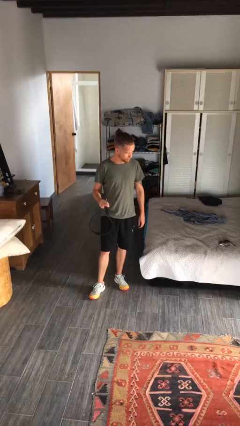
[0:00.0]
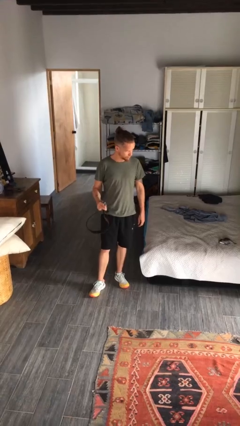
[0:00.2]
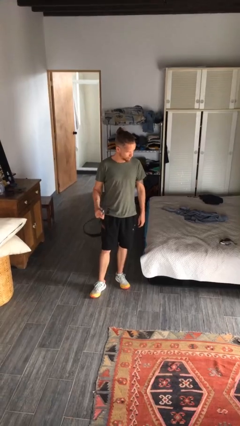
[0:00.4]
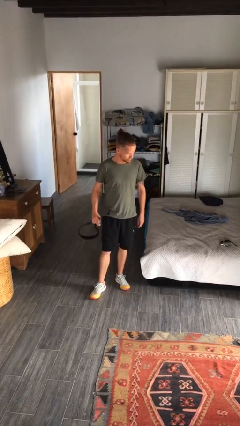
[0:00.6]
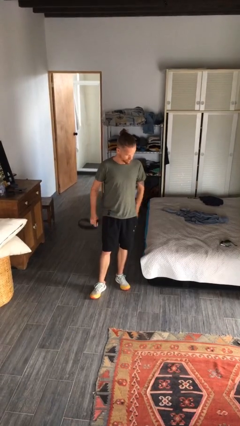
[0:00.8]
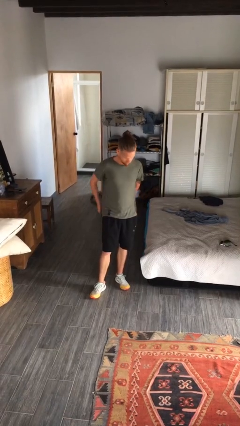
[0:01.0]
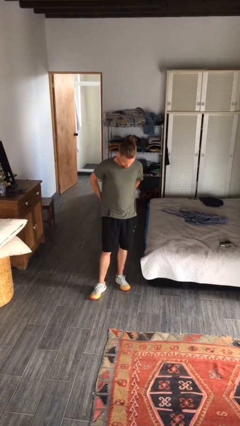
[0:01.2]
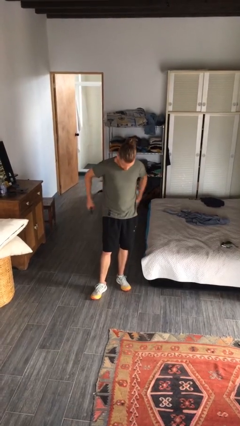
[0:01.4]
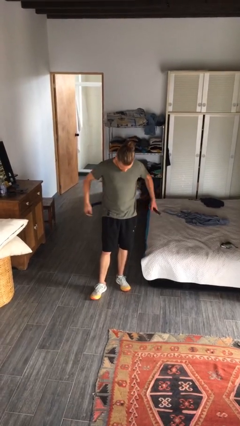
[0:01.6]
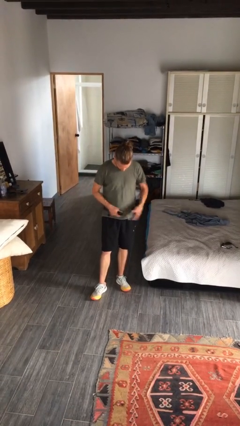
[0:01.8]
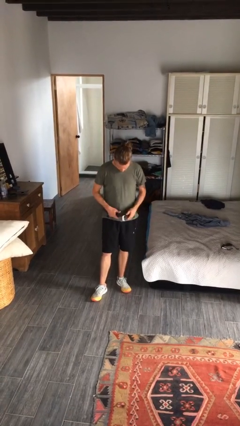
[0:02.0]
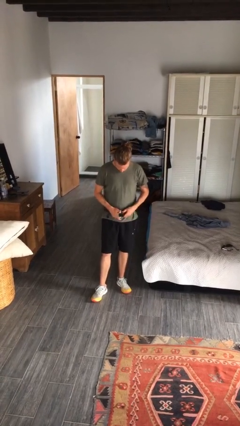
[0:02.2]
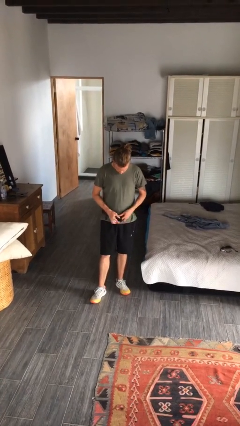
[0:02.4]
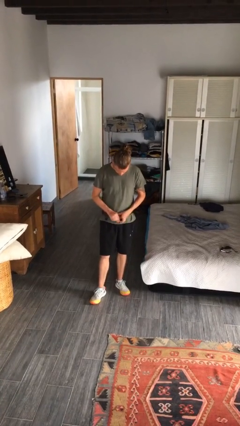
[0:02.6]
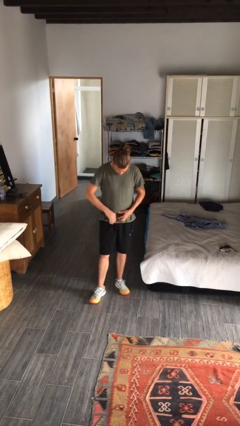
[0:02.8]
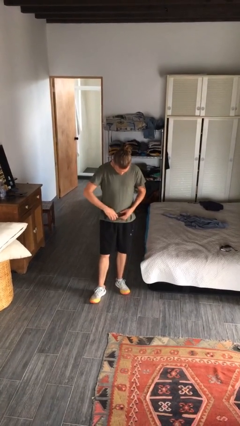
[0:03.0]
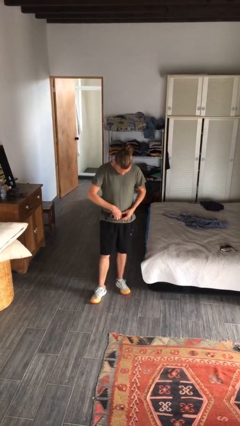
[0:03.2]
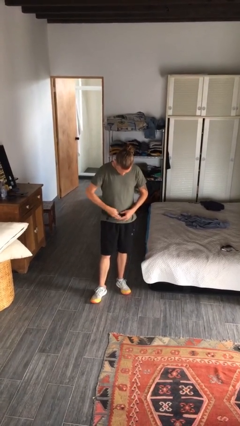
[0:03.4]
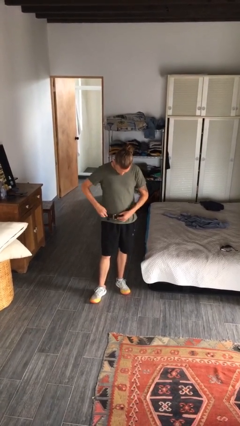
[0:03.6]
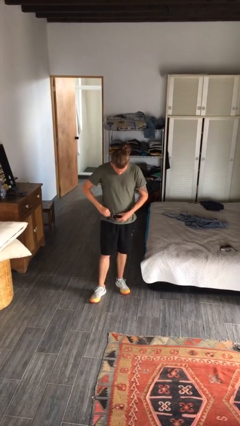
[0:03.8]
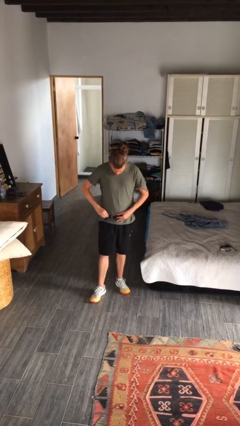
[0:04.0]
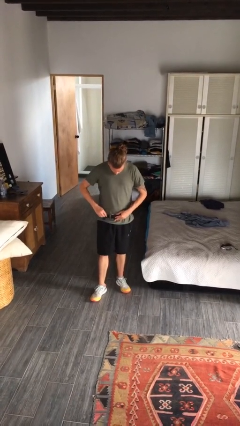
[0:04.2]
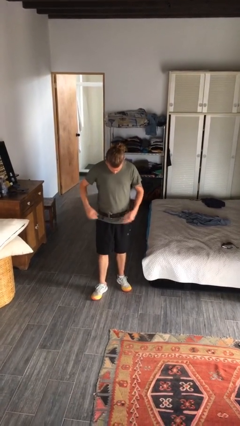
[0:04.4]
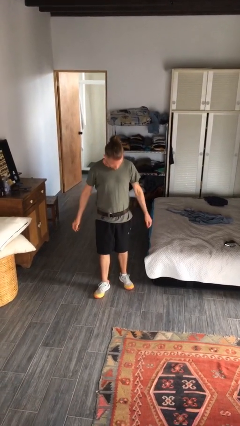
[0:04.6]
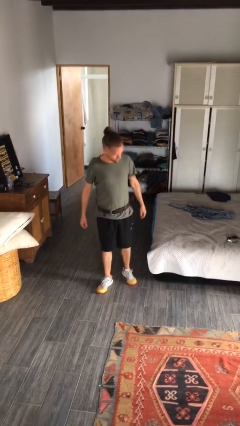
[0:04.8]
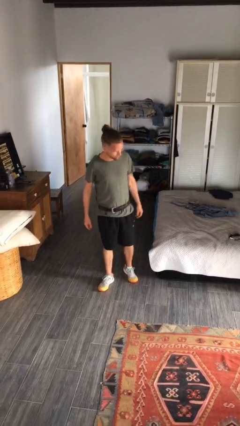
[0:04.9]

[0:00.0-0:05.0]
person puts on belt

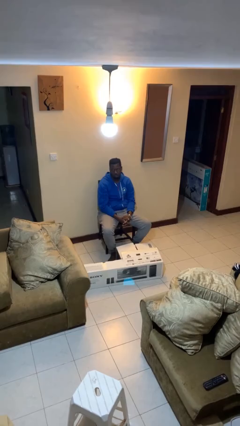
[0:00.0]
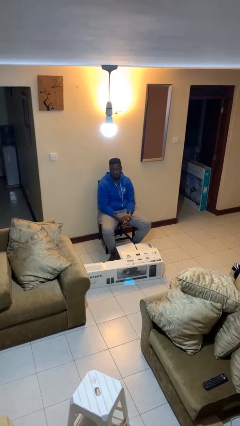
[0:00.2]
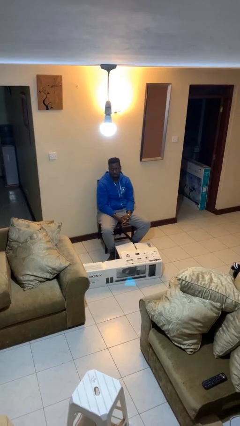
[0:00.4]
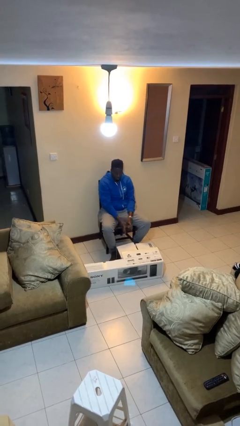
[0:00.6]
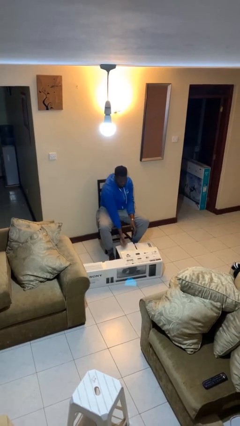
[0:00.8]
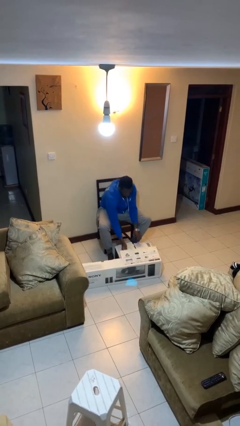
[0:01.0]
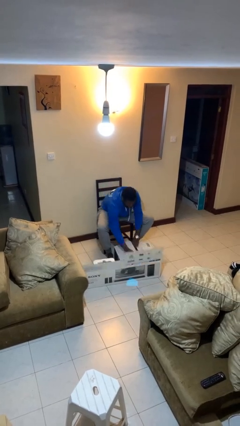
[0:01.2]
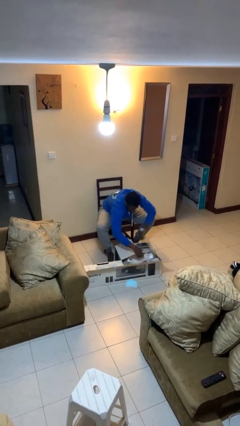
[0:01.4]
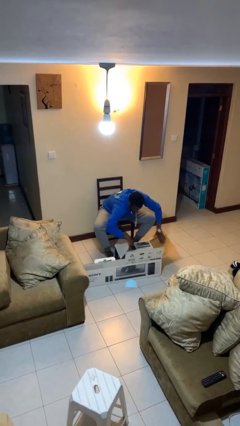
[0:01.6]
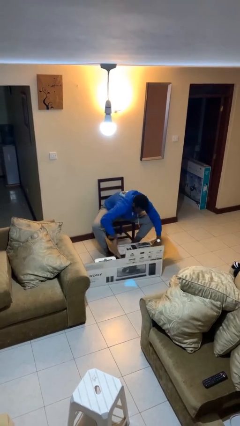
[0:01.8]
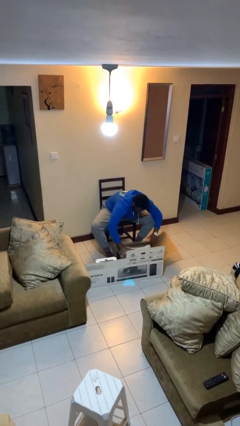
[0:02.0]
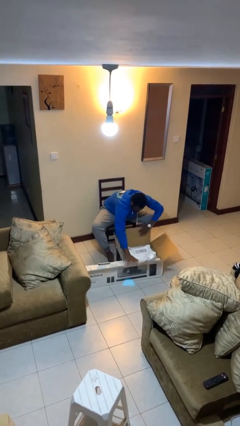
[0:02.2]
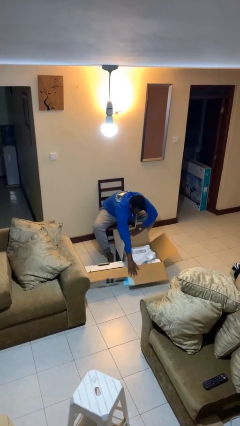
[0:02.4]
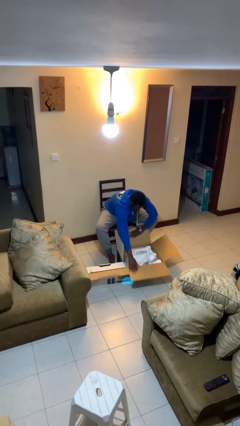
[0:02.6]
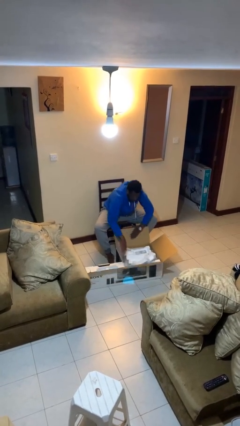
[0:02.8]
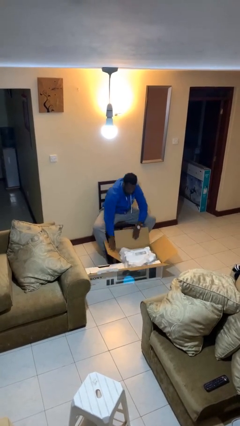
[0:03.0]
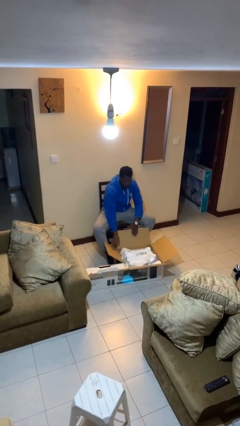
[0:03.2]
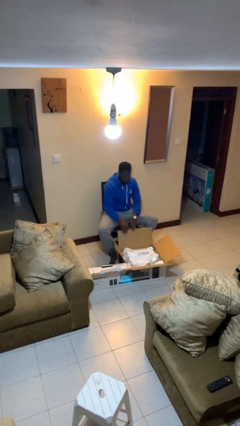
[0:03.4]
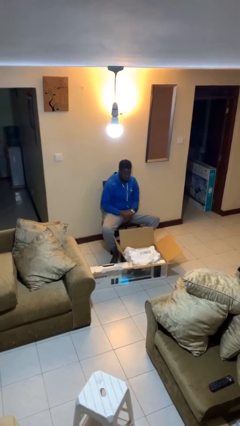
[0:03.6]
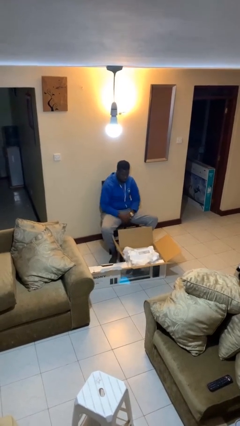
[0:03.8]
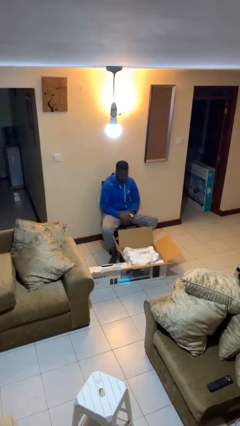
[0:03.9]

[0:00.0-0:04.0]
person opens box

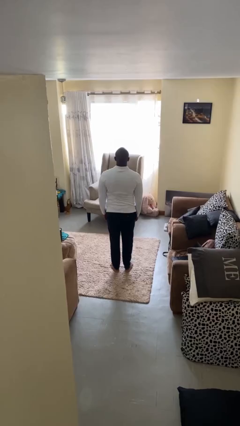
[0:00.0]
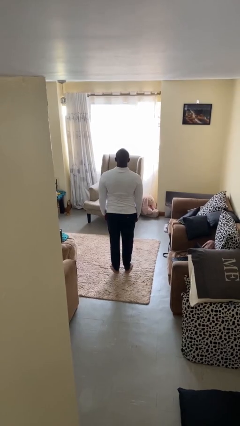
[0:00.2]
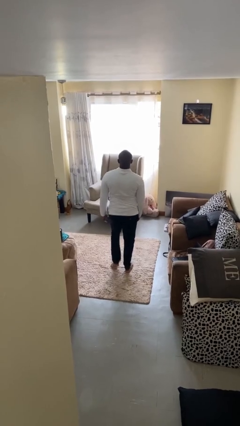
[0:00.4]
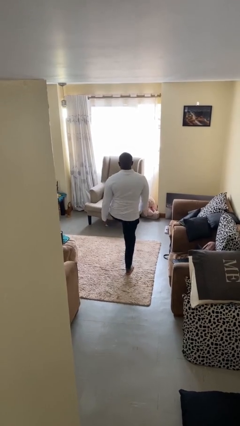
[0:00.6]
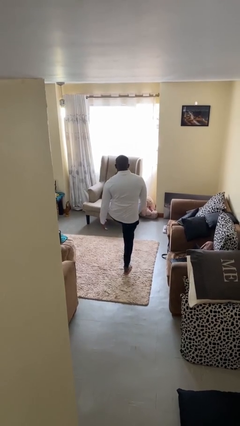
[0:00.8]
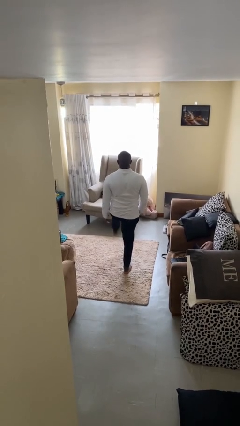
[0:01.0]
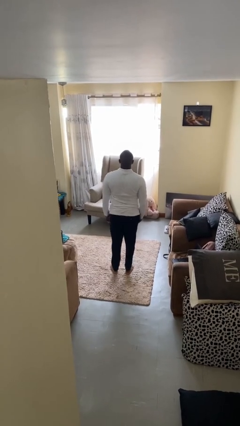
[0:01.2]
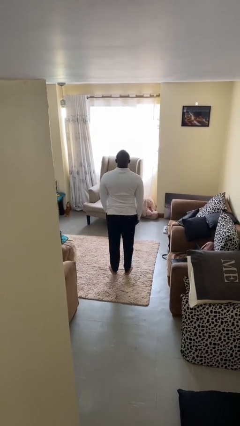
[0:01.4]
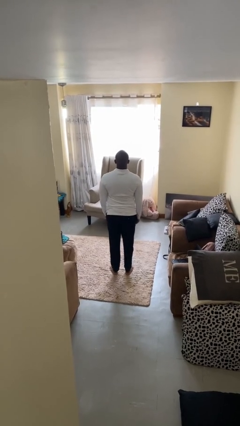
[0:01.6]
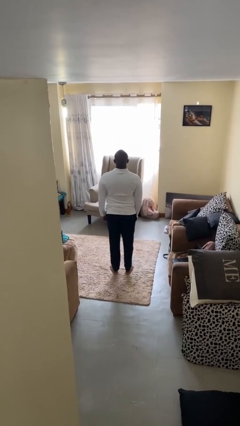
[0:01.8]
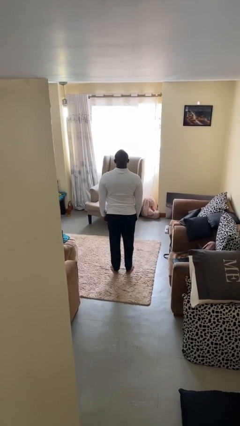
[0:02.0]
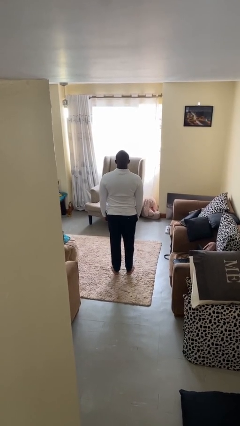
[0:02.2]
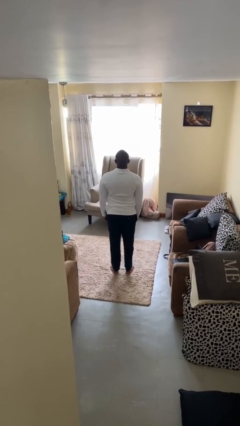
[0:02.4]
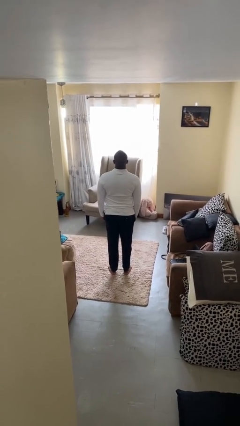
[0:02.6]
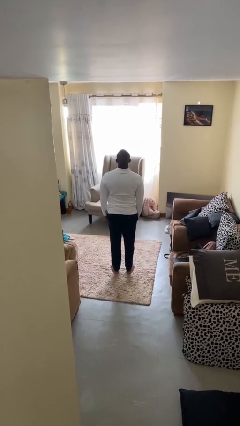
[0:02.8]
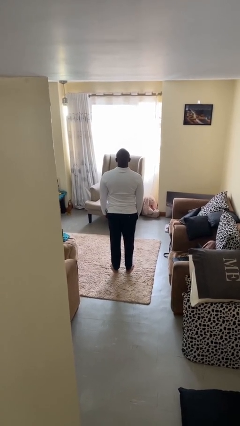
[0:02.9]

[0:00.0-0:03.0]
person karate kicks

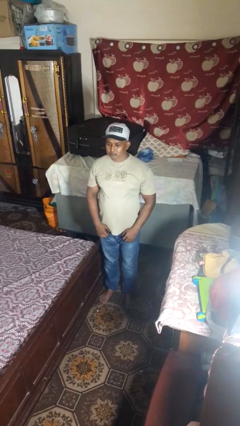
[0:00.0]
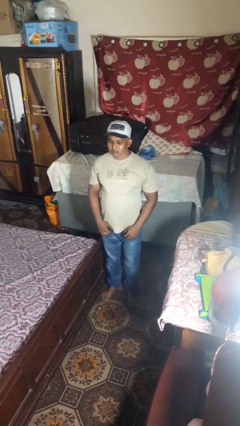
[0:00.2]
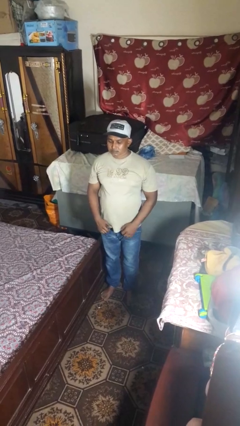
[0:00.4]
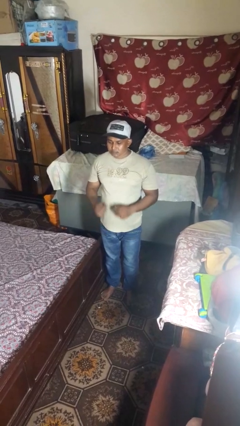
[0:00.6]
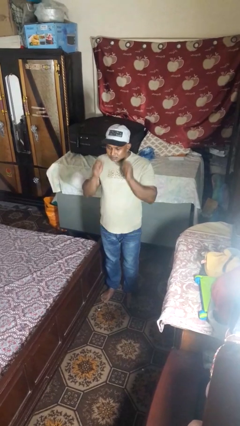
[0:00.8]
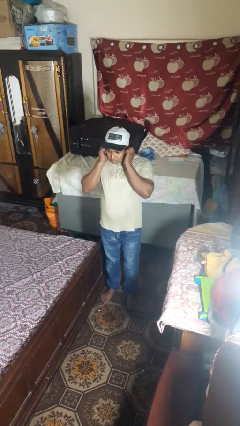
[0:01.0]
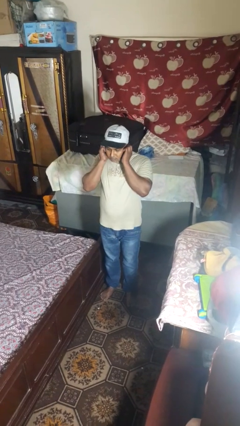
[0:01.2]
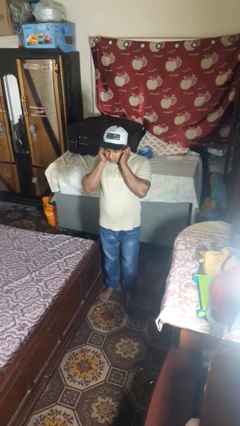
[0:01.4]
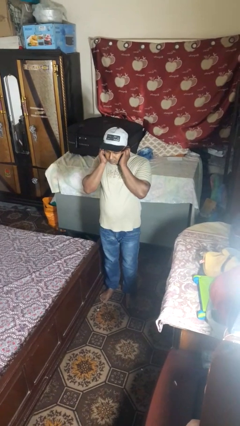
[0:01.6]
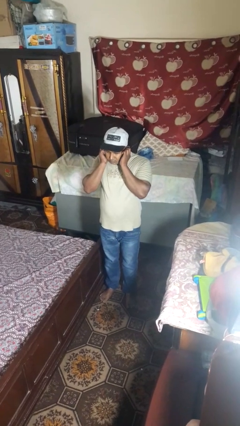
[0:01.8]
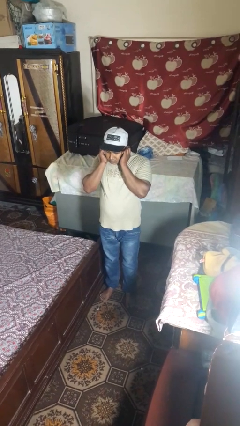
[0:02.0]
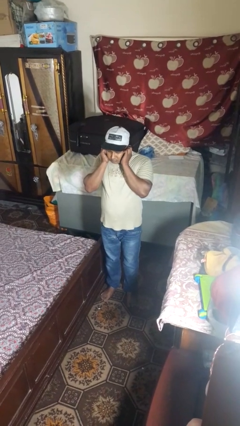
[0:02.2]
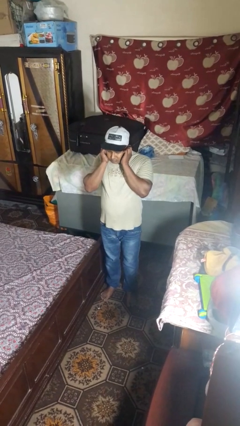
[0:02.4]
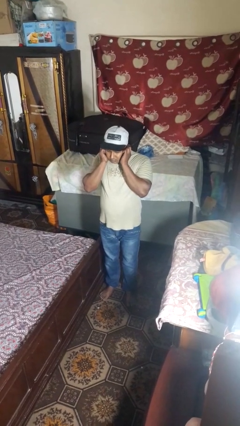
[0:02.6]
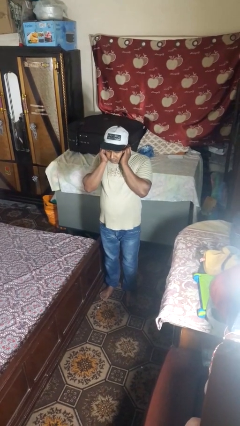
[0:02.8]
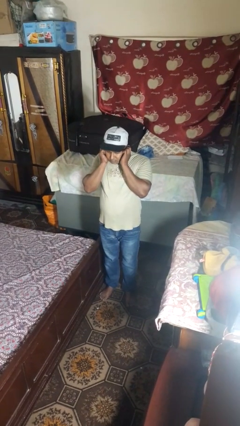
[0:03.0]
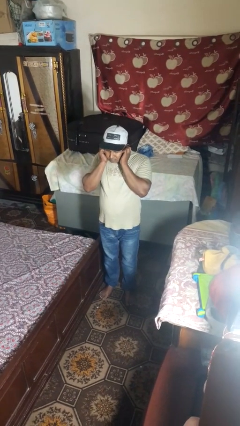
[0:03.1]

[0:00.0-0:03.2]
person puts fingers in ear

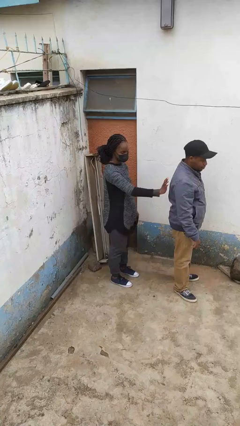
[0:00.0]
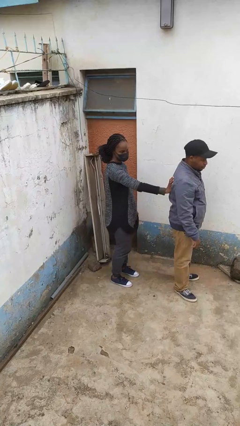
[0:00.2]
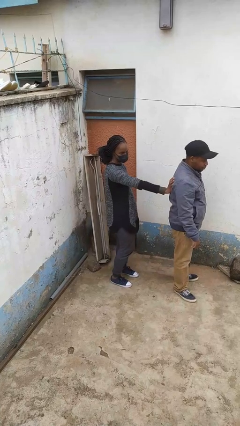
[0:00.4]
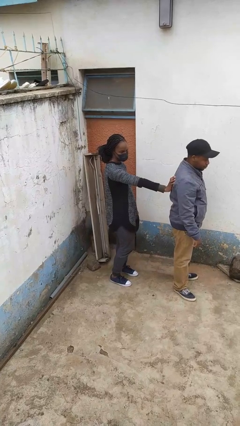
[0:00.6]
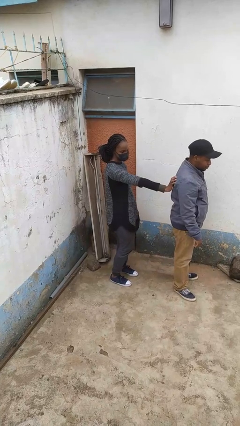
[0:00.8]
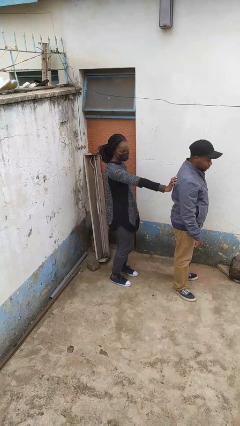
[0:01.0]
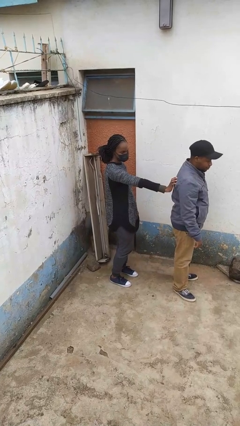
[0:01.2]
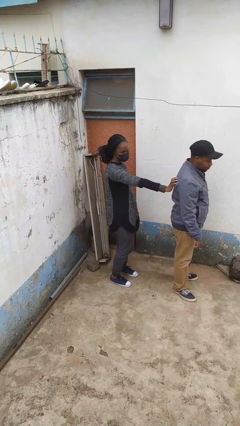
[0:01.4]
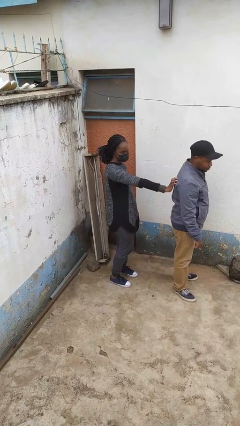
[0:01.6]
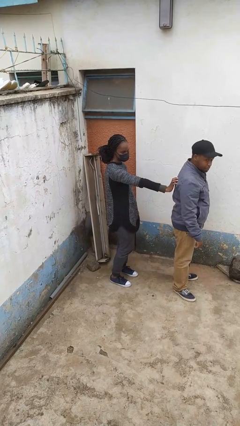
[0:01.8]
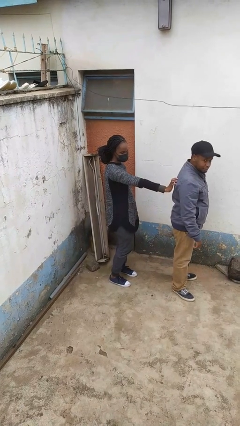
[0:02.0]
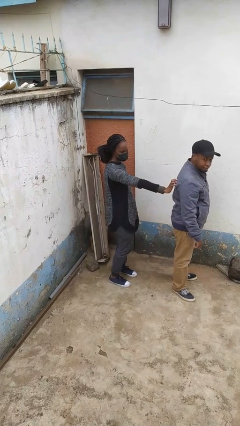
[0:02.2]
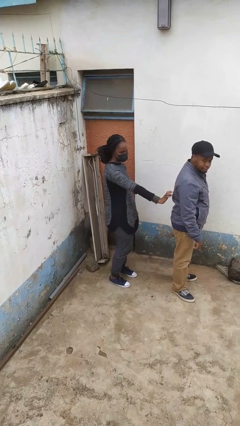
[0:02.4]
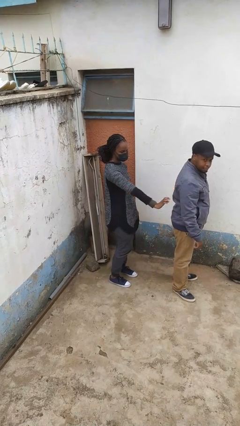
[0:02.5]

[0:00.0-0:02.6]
person touches back of person
